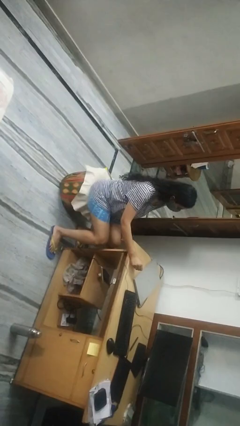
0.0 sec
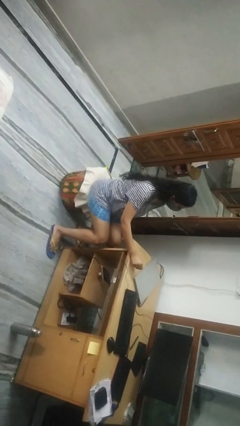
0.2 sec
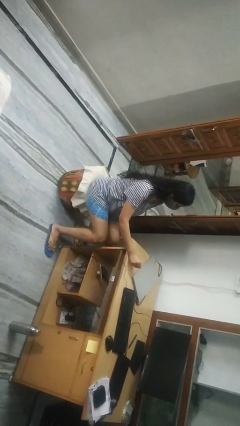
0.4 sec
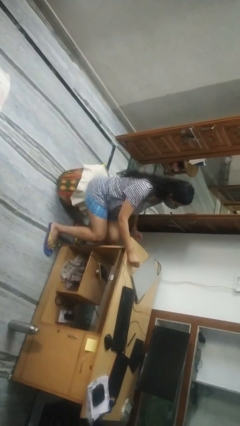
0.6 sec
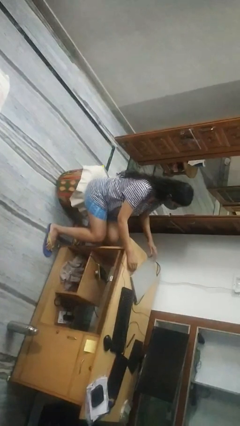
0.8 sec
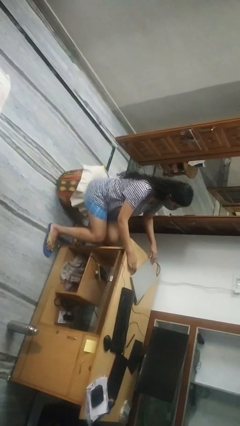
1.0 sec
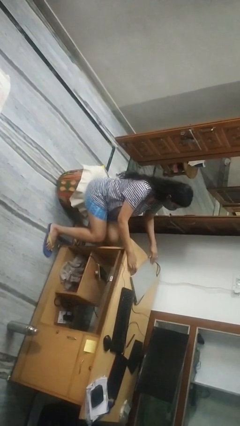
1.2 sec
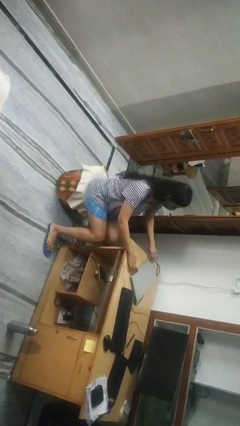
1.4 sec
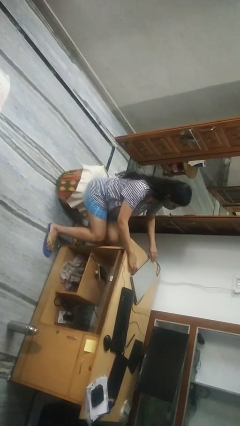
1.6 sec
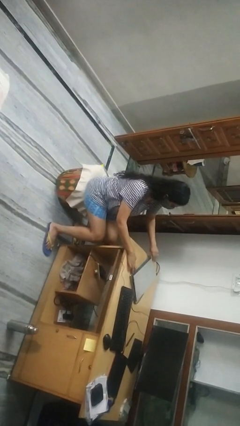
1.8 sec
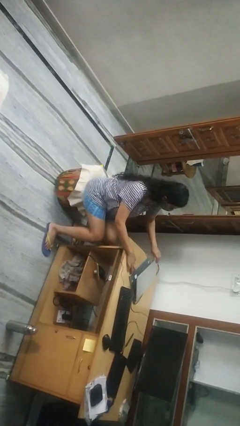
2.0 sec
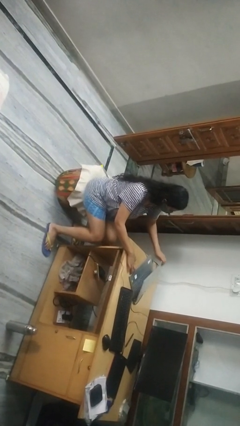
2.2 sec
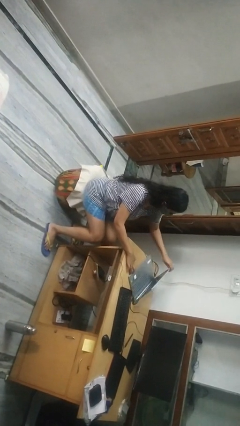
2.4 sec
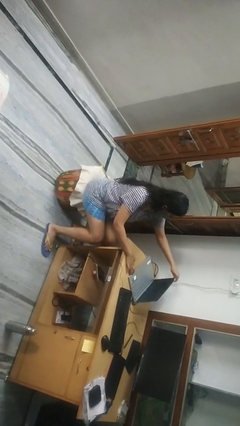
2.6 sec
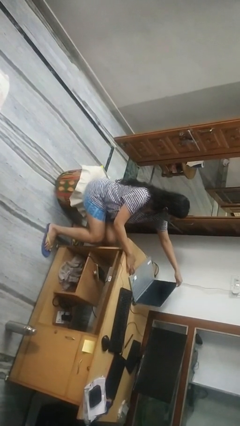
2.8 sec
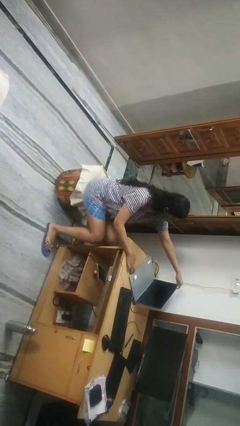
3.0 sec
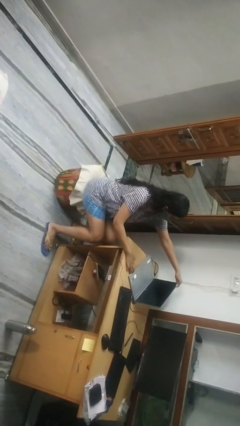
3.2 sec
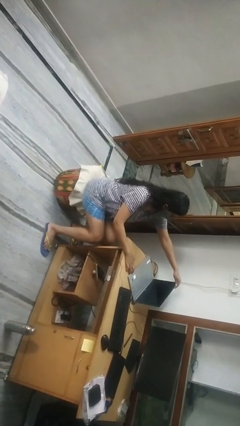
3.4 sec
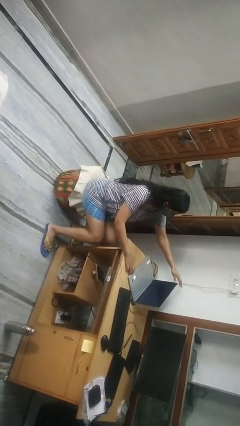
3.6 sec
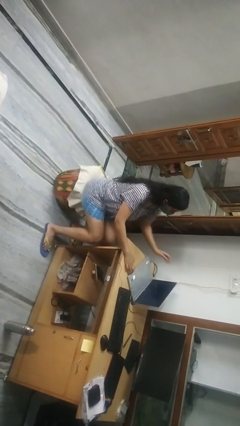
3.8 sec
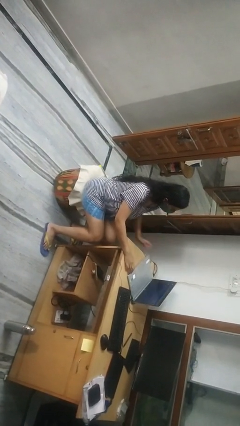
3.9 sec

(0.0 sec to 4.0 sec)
person opens laptop

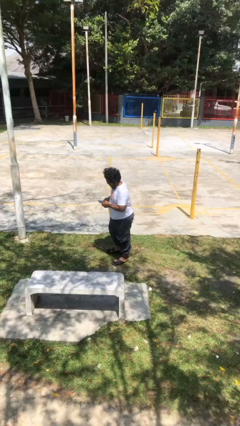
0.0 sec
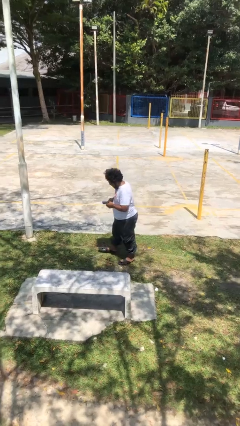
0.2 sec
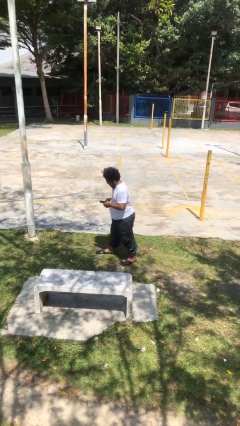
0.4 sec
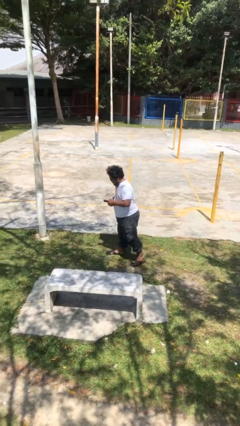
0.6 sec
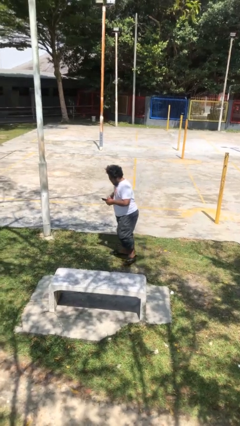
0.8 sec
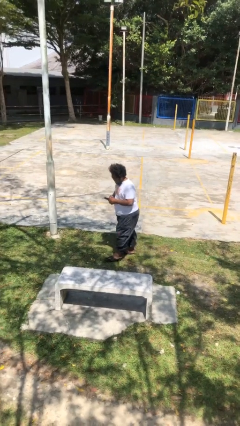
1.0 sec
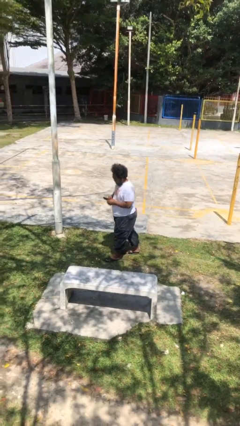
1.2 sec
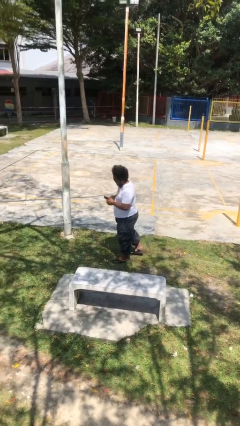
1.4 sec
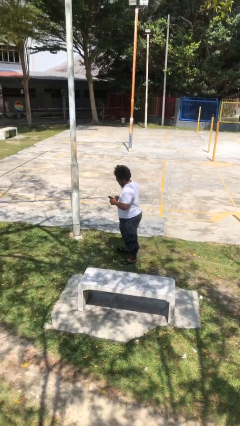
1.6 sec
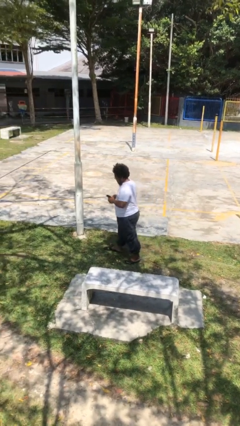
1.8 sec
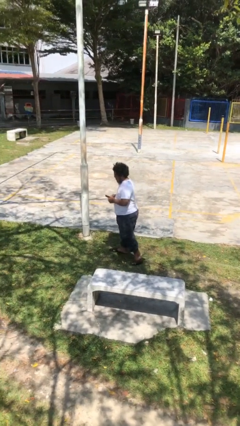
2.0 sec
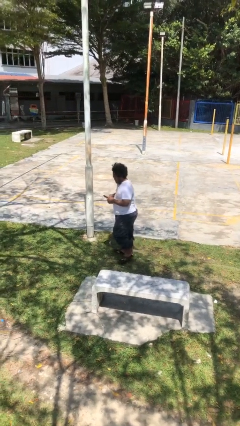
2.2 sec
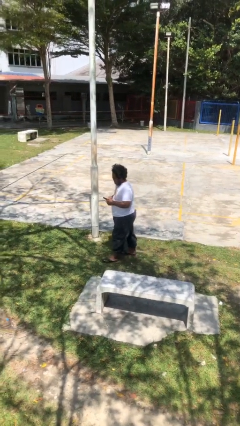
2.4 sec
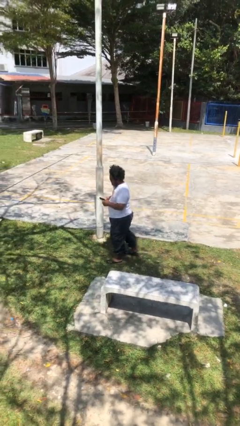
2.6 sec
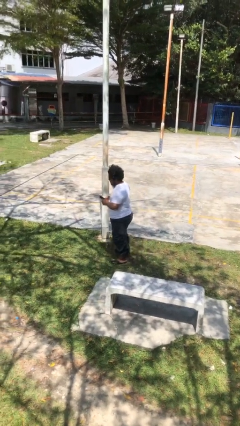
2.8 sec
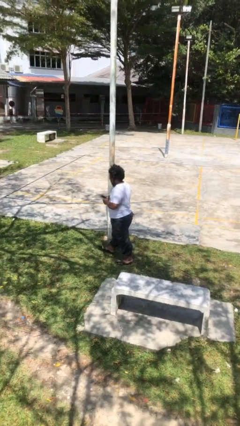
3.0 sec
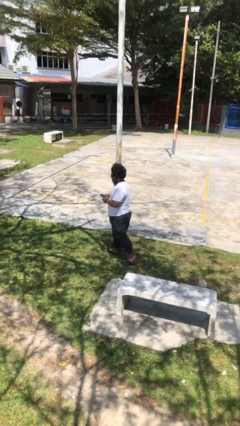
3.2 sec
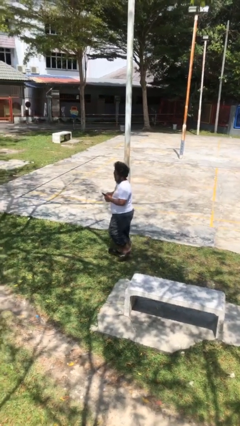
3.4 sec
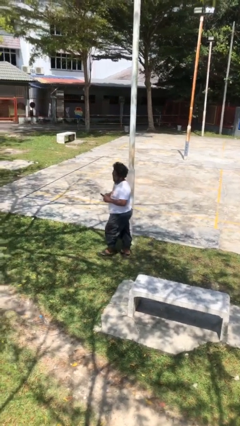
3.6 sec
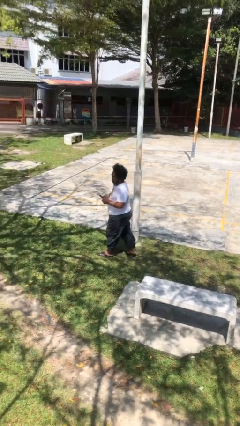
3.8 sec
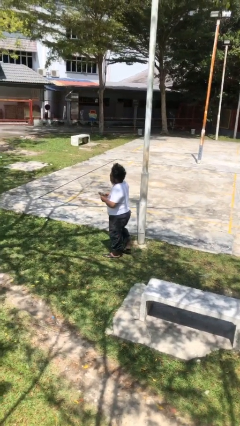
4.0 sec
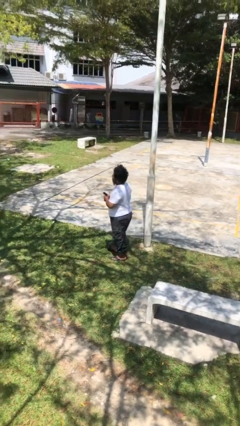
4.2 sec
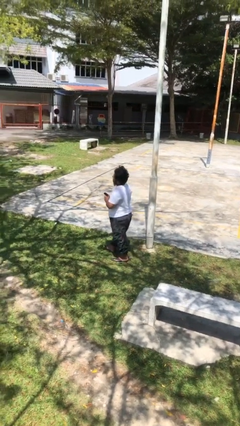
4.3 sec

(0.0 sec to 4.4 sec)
person texts on phone

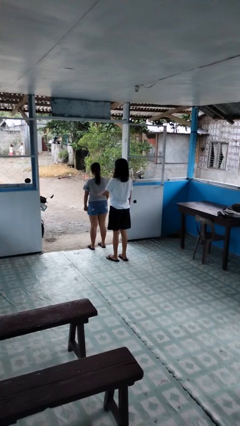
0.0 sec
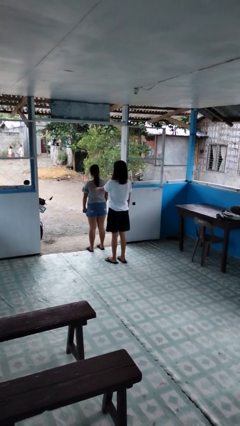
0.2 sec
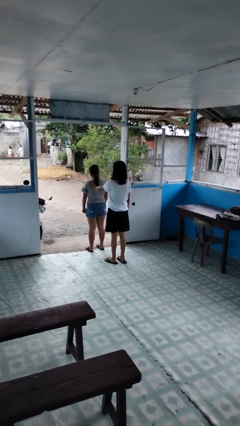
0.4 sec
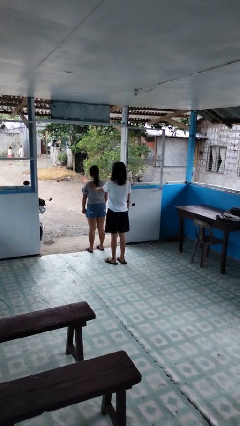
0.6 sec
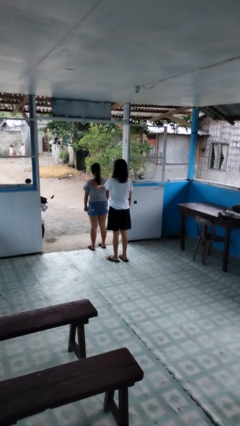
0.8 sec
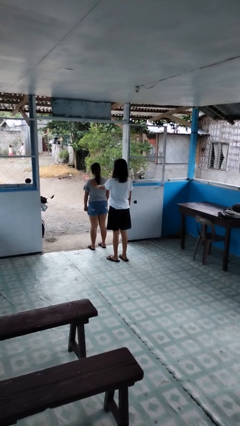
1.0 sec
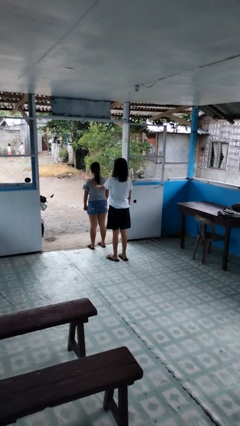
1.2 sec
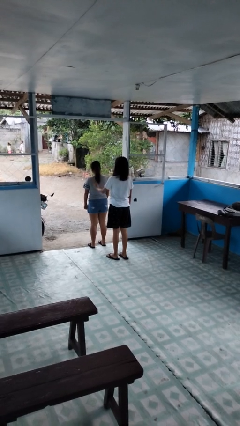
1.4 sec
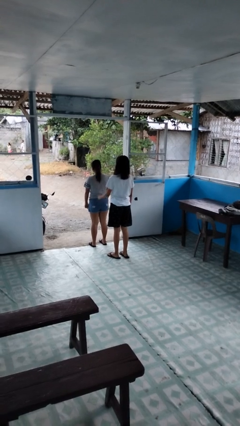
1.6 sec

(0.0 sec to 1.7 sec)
person touches back of person

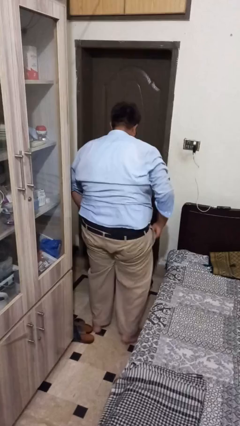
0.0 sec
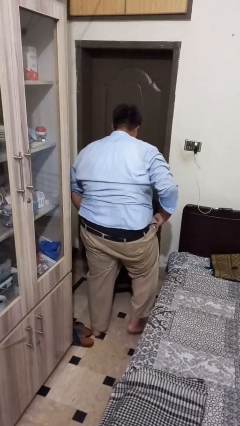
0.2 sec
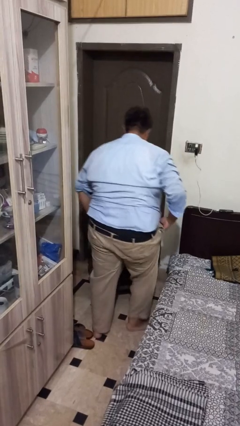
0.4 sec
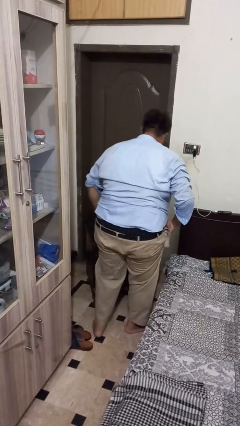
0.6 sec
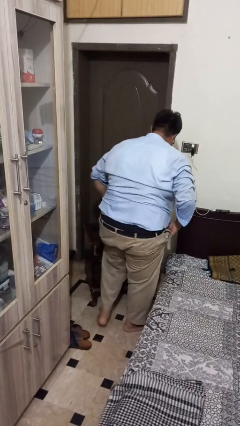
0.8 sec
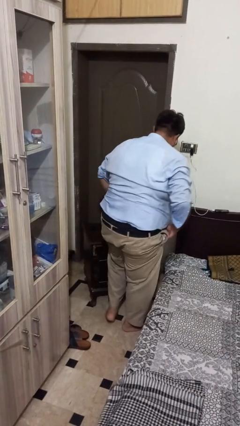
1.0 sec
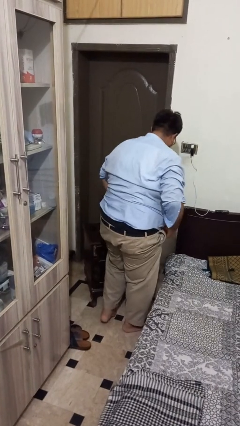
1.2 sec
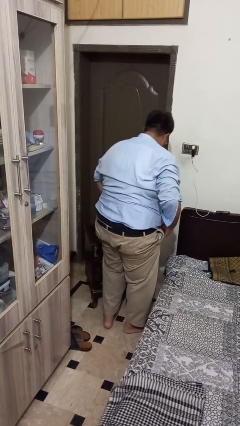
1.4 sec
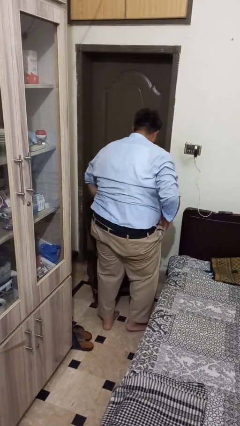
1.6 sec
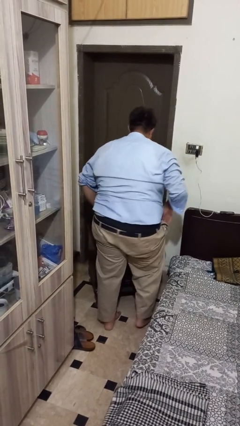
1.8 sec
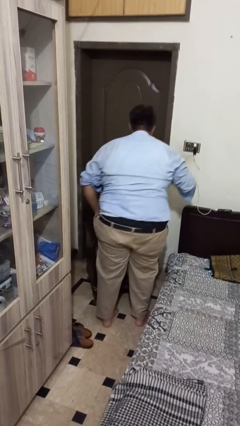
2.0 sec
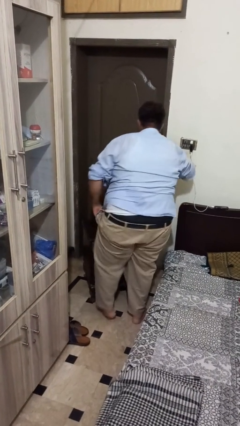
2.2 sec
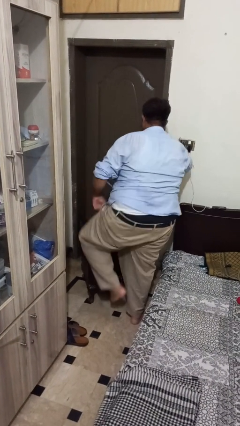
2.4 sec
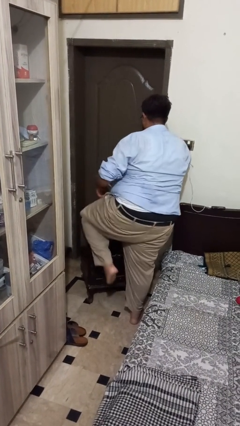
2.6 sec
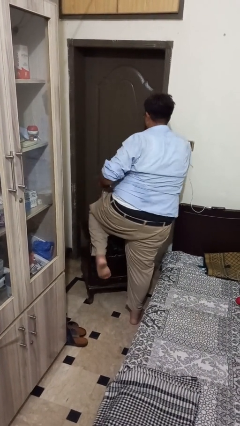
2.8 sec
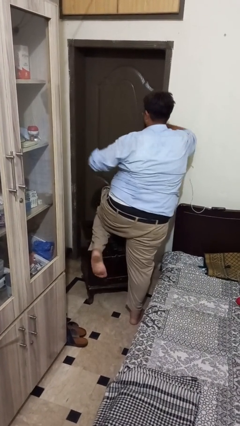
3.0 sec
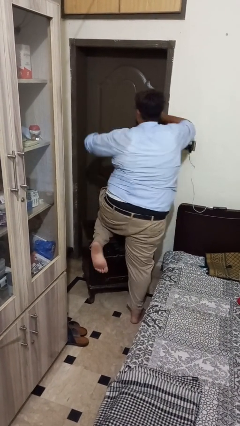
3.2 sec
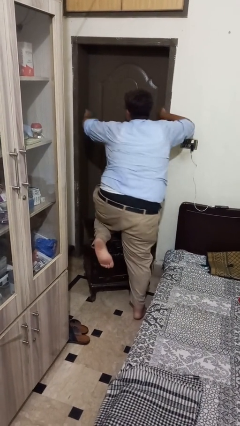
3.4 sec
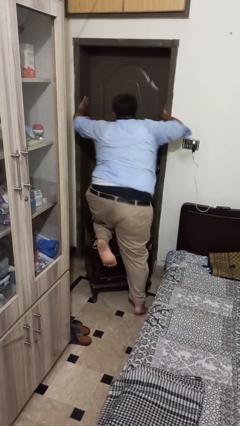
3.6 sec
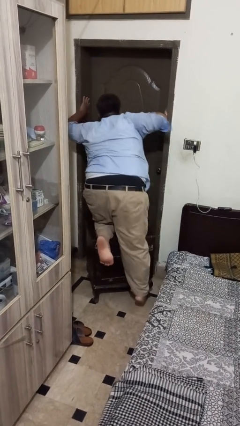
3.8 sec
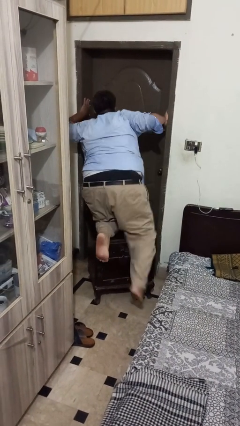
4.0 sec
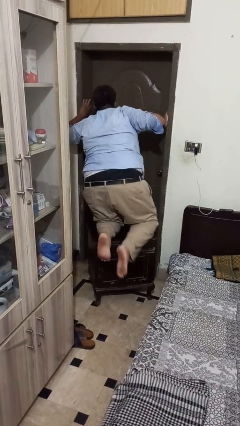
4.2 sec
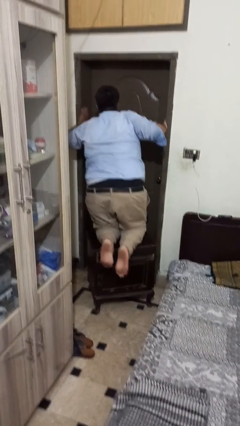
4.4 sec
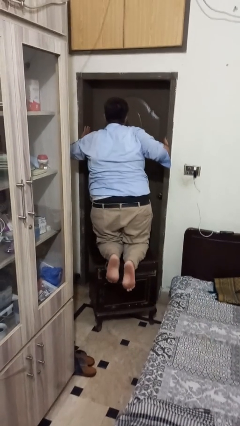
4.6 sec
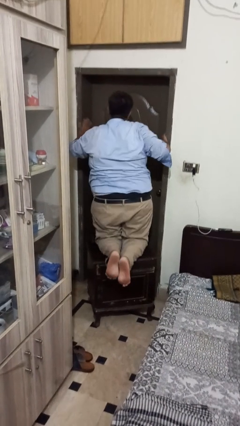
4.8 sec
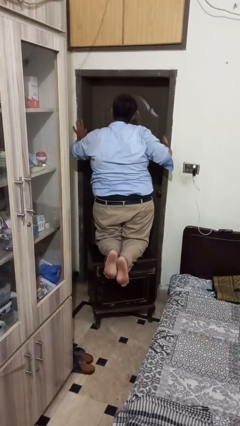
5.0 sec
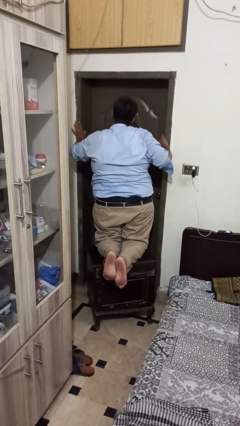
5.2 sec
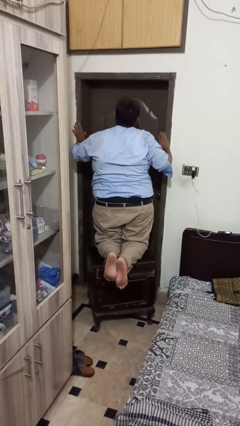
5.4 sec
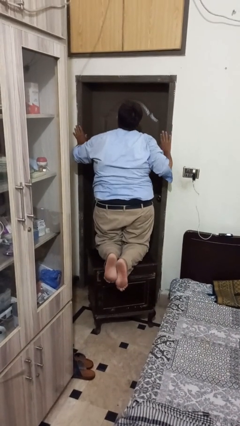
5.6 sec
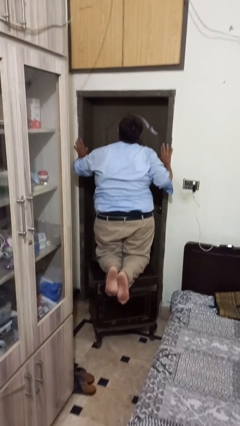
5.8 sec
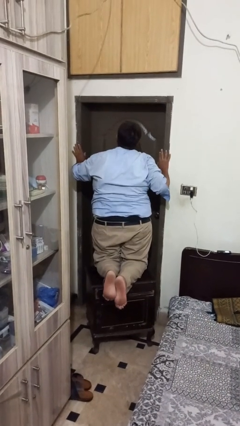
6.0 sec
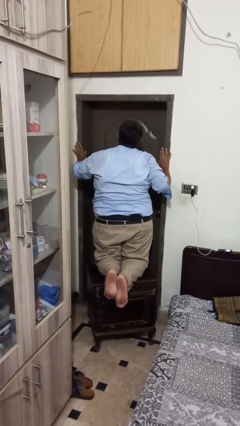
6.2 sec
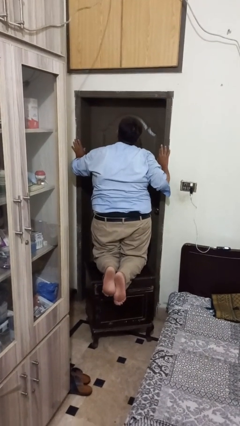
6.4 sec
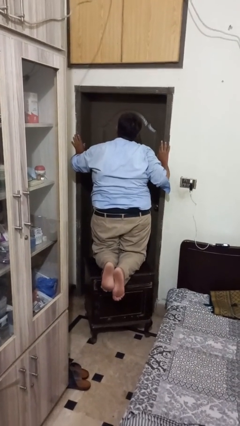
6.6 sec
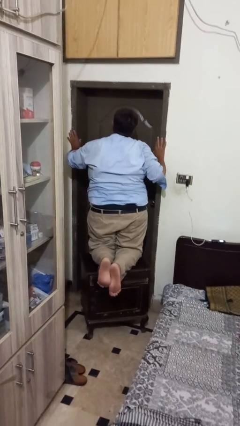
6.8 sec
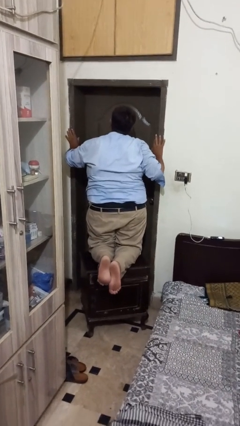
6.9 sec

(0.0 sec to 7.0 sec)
person climbs on table

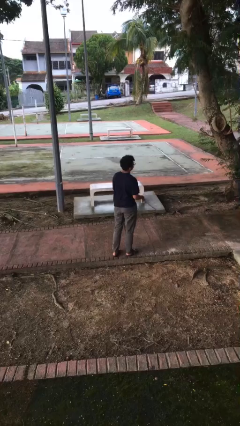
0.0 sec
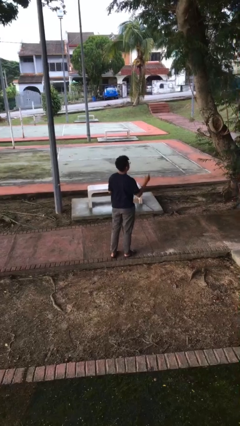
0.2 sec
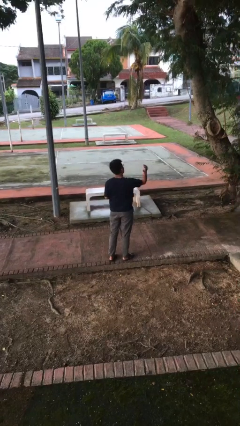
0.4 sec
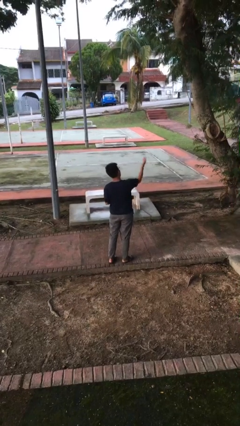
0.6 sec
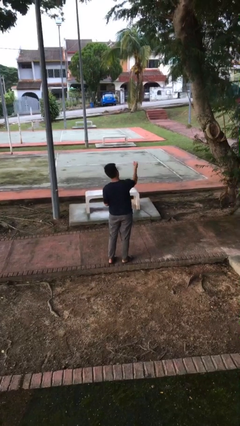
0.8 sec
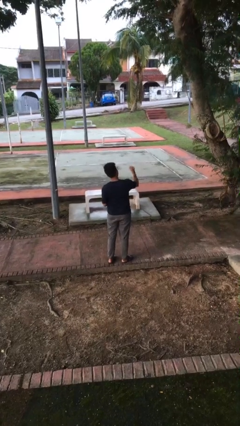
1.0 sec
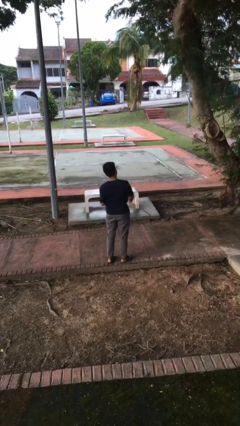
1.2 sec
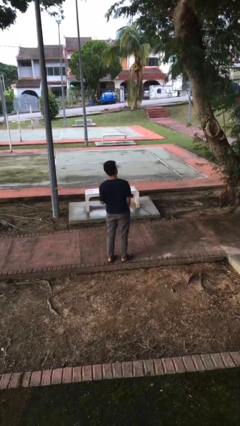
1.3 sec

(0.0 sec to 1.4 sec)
person karate chop
